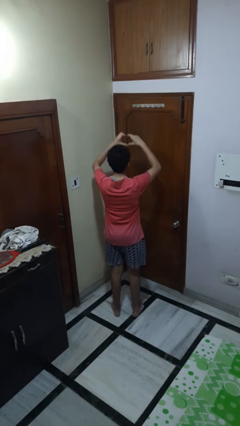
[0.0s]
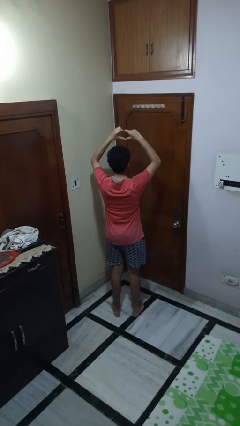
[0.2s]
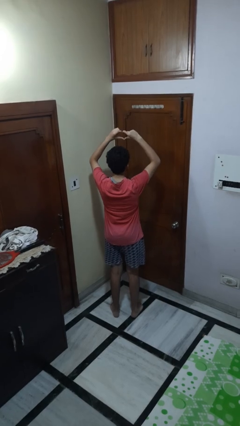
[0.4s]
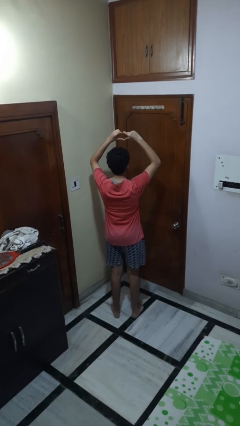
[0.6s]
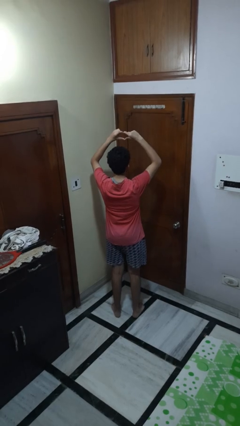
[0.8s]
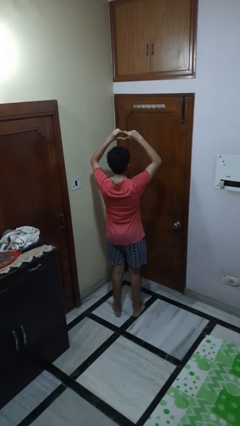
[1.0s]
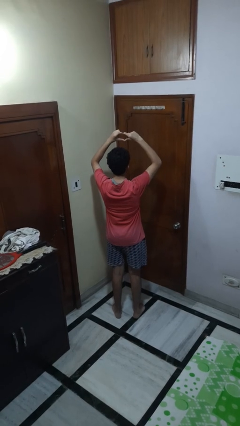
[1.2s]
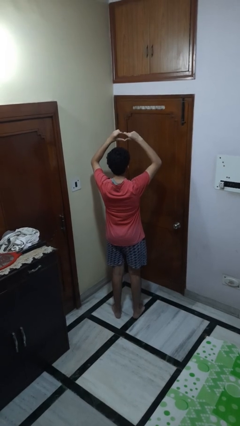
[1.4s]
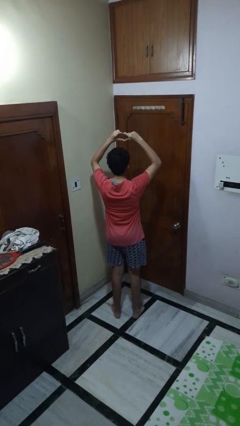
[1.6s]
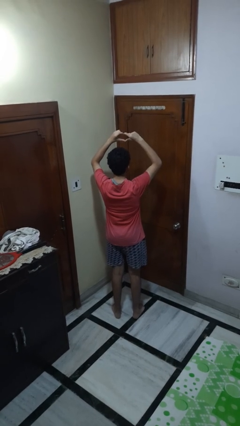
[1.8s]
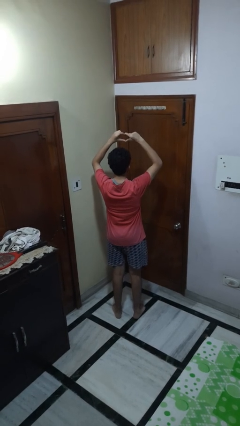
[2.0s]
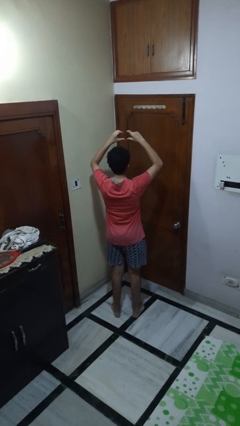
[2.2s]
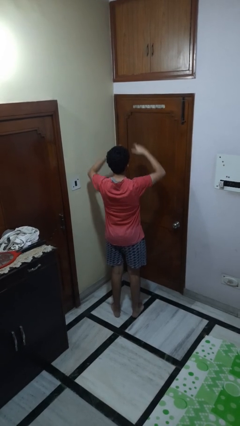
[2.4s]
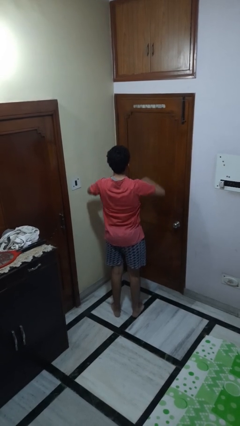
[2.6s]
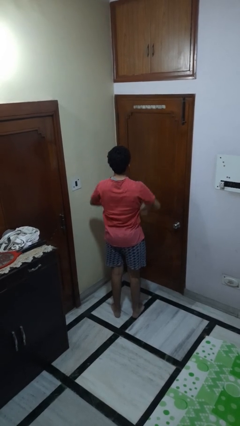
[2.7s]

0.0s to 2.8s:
person gestures heart

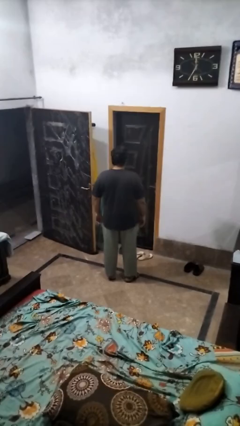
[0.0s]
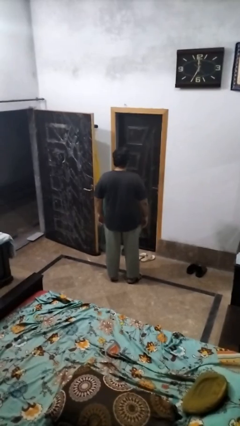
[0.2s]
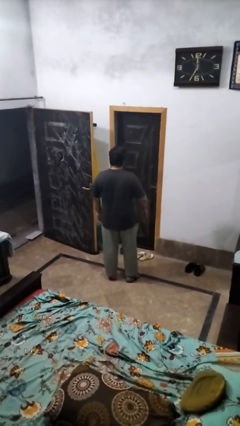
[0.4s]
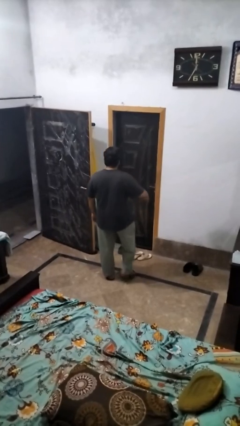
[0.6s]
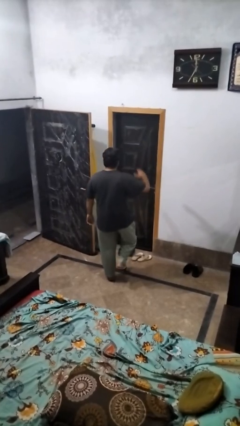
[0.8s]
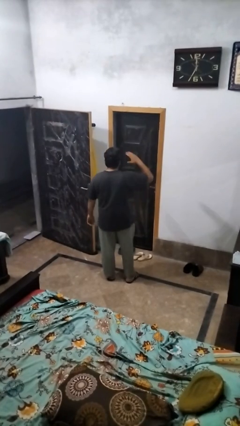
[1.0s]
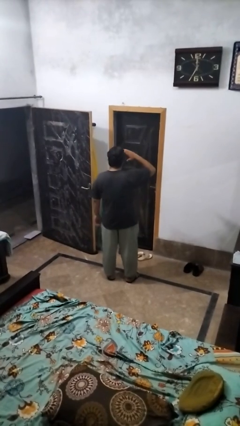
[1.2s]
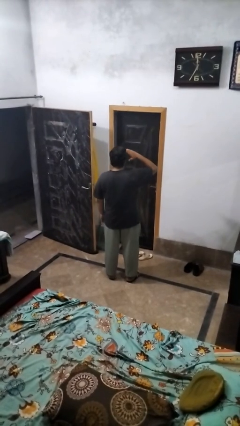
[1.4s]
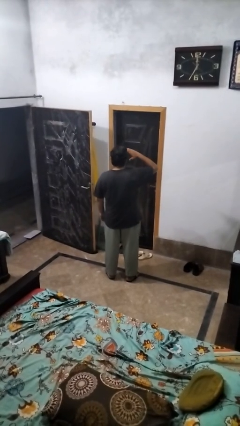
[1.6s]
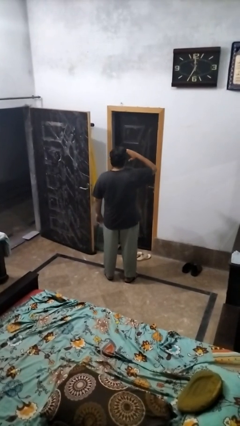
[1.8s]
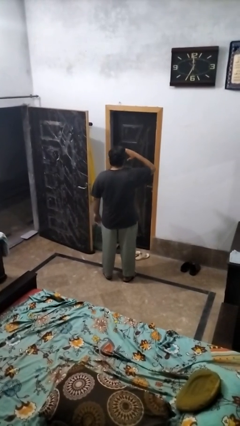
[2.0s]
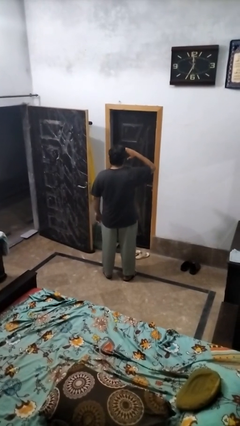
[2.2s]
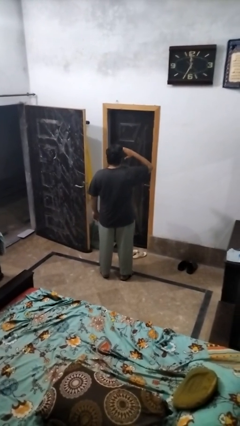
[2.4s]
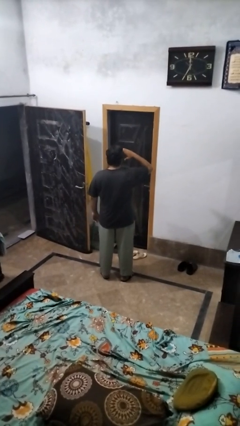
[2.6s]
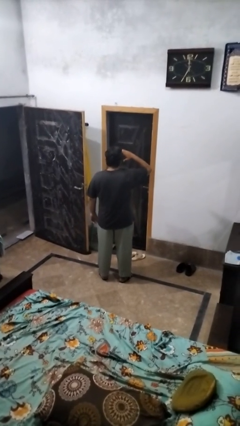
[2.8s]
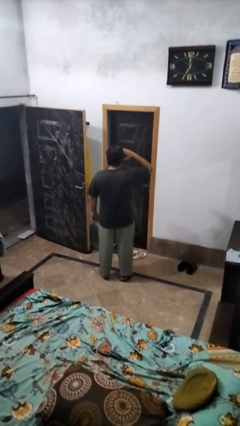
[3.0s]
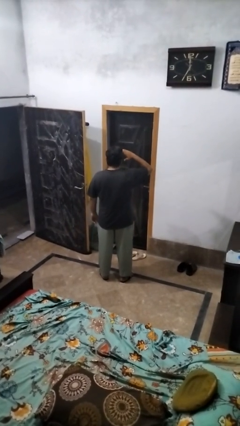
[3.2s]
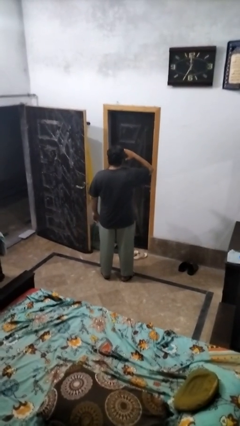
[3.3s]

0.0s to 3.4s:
person salutes

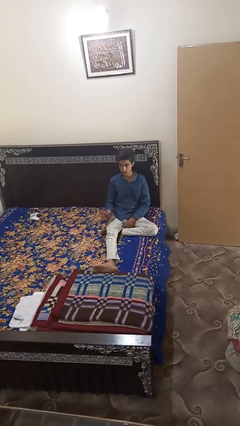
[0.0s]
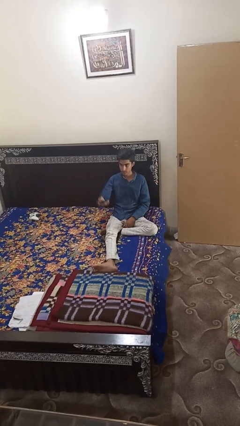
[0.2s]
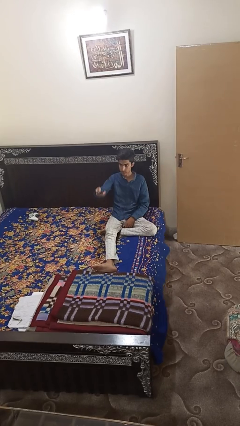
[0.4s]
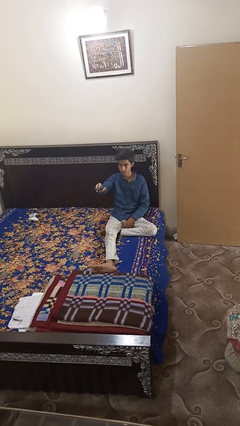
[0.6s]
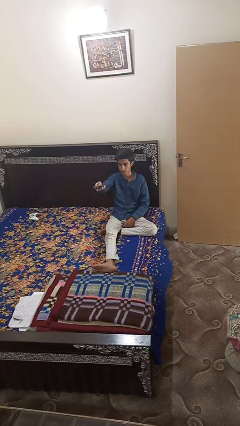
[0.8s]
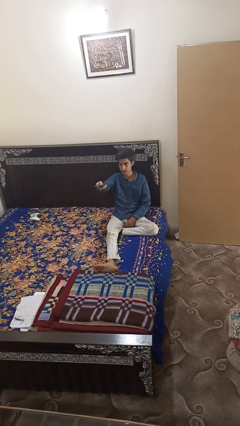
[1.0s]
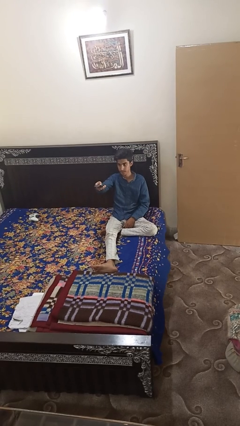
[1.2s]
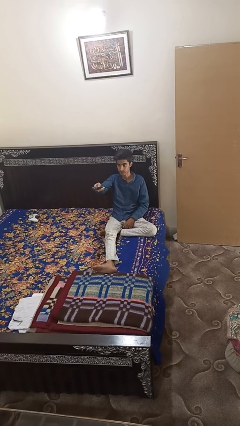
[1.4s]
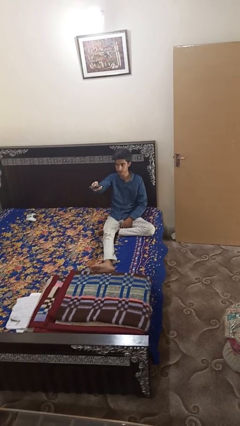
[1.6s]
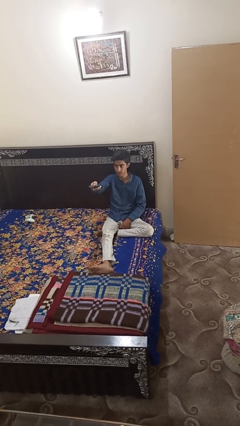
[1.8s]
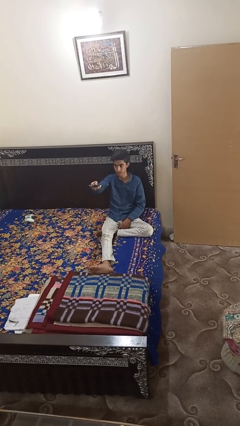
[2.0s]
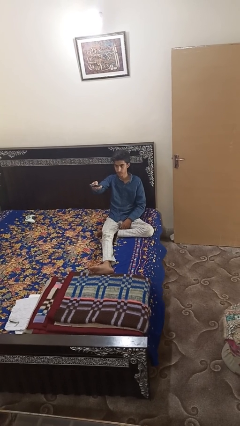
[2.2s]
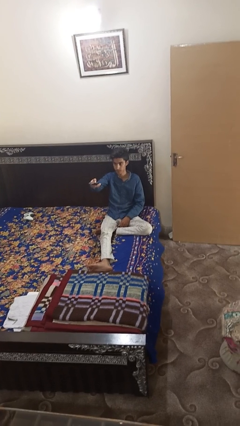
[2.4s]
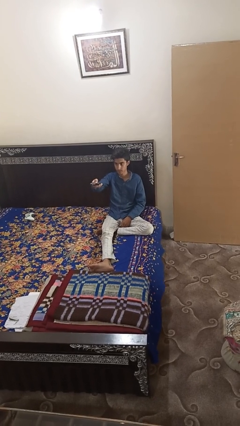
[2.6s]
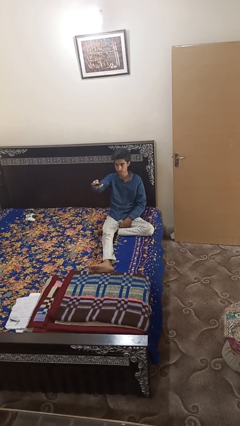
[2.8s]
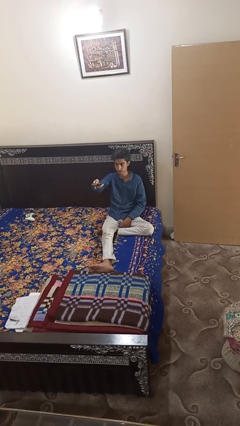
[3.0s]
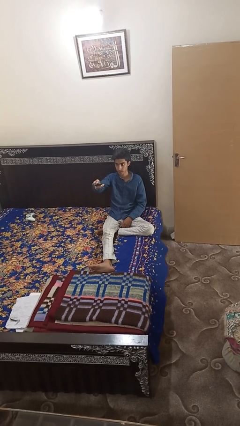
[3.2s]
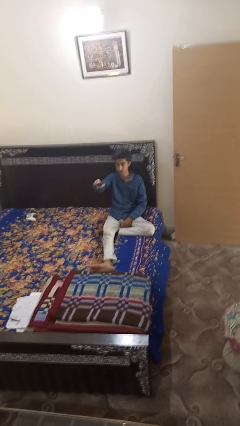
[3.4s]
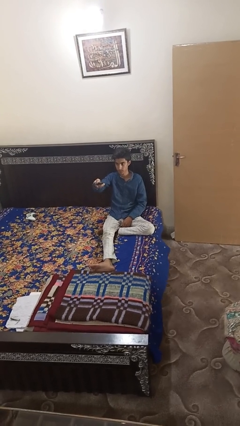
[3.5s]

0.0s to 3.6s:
person uses television remote

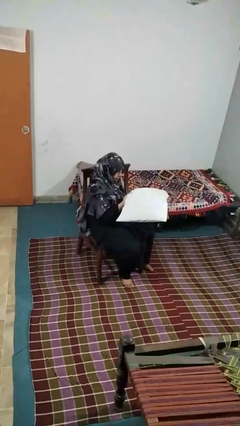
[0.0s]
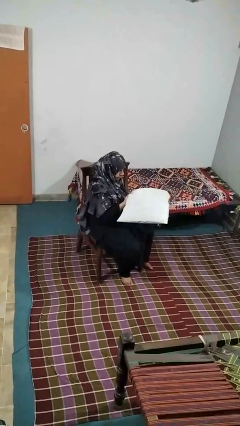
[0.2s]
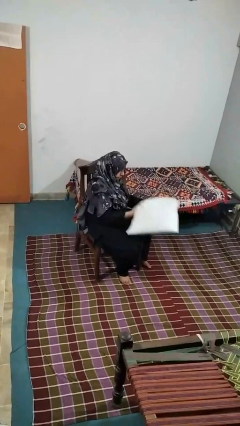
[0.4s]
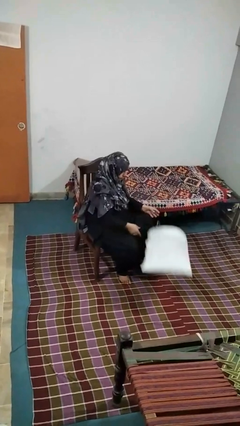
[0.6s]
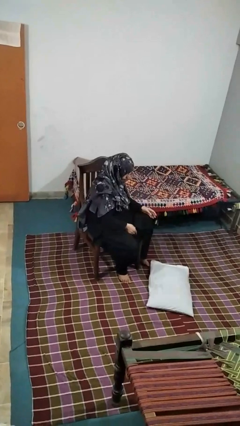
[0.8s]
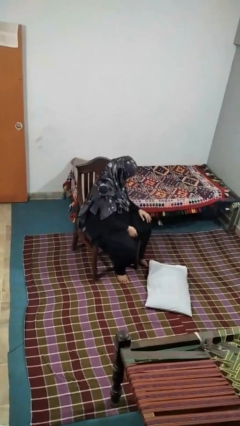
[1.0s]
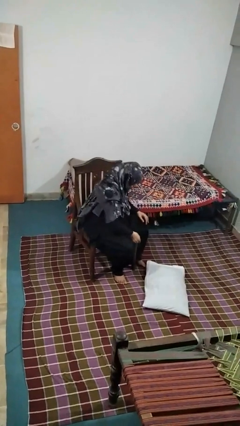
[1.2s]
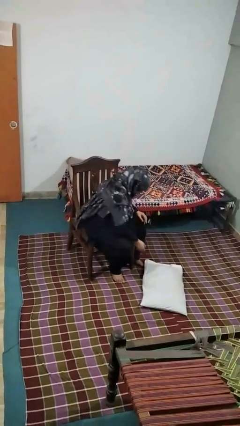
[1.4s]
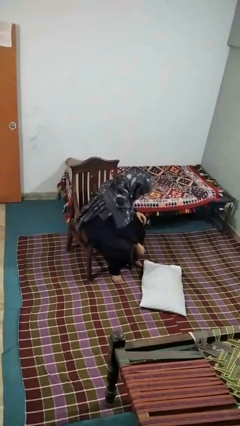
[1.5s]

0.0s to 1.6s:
person drops object

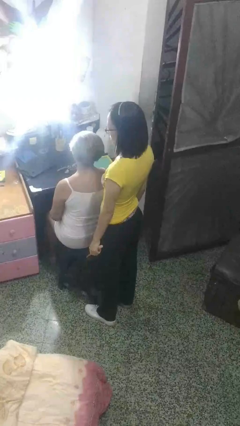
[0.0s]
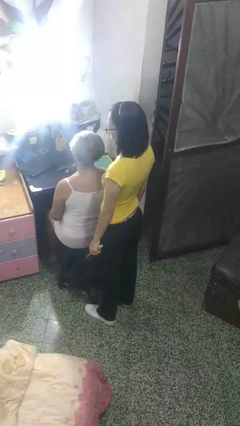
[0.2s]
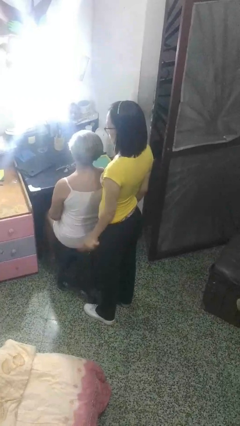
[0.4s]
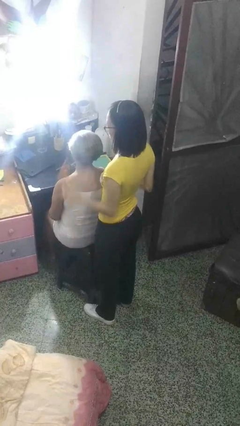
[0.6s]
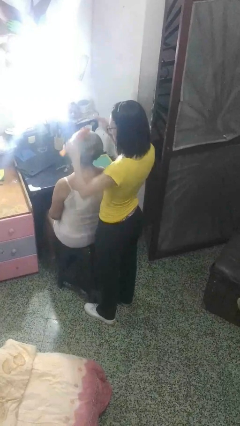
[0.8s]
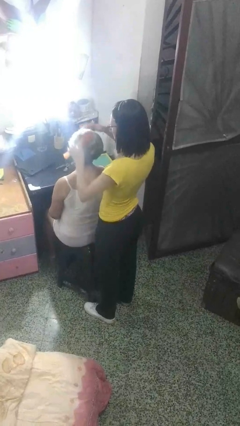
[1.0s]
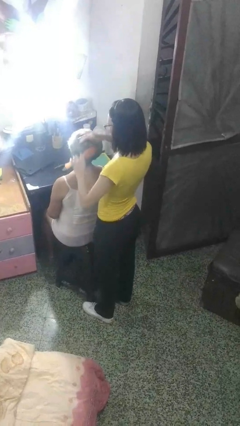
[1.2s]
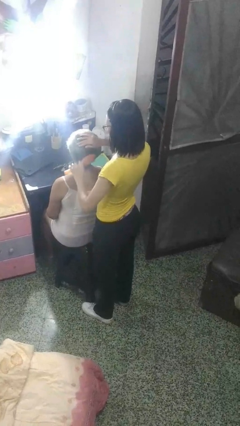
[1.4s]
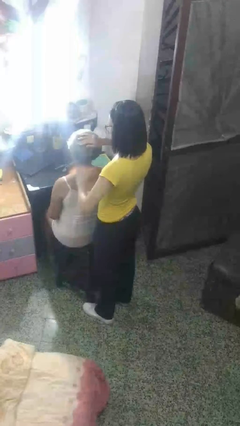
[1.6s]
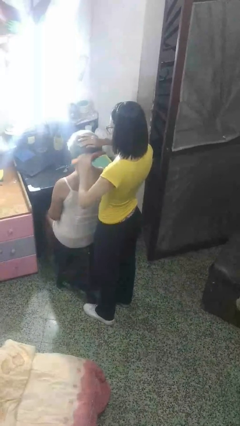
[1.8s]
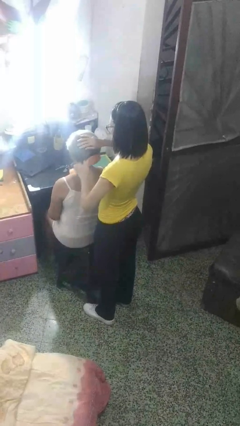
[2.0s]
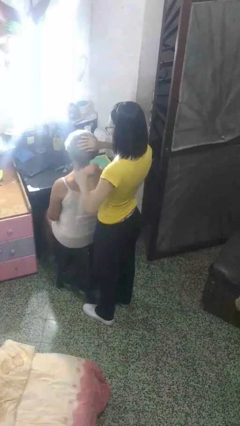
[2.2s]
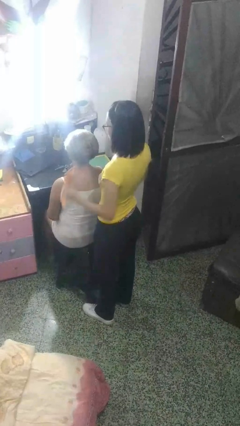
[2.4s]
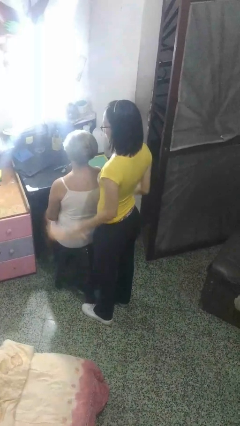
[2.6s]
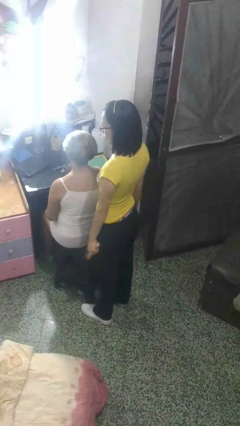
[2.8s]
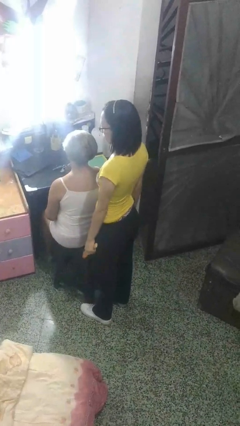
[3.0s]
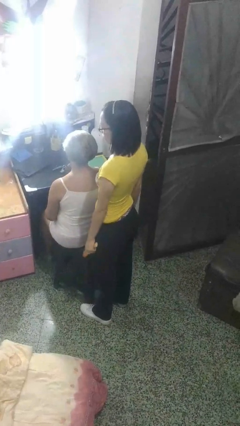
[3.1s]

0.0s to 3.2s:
person brushes hair of person

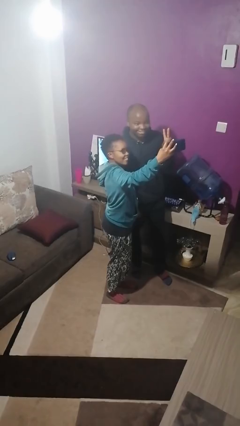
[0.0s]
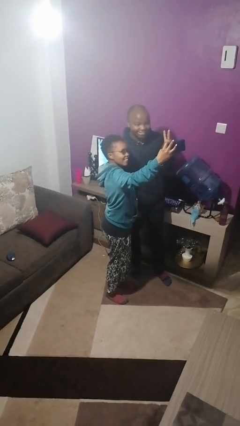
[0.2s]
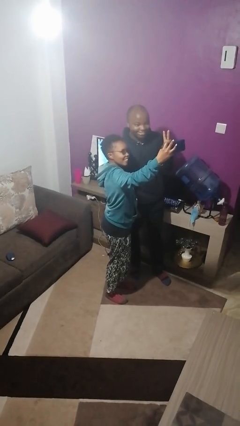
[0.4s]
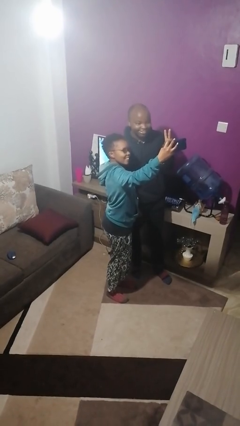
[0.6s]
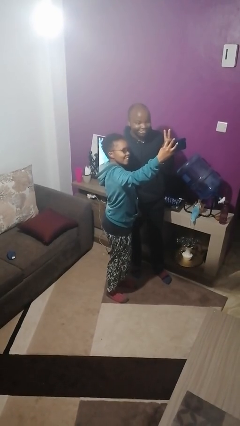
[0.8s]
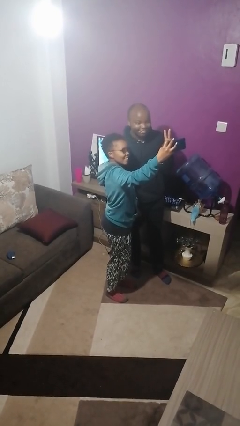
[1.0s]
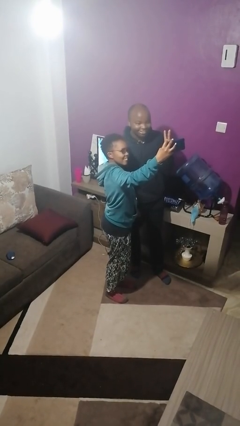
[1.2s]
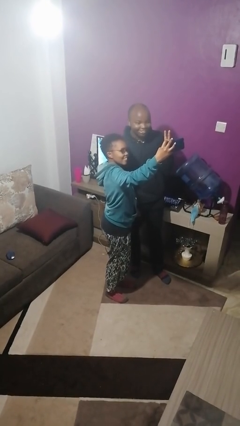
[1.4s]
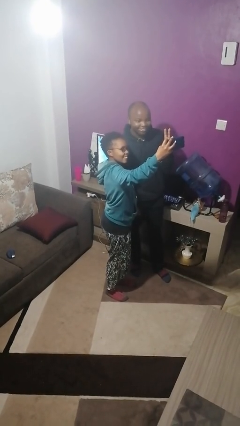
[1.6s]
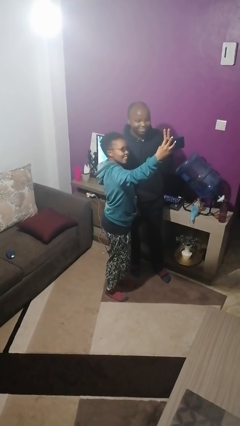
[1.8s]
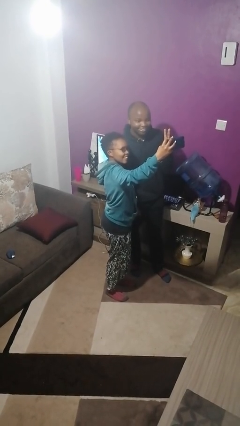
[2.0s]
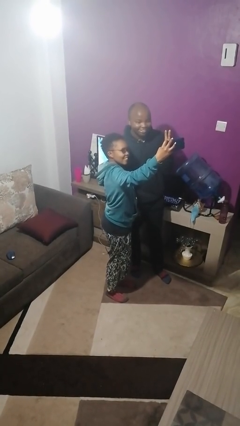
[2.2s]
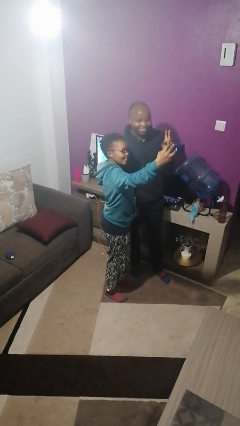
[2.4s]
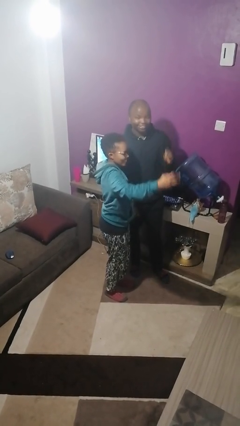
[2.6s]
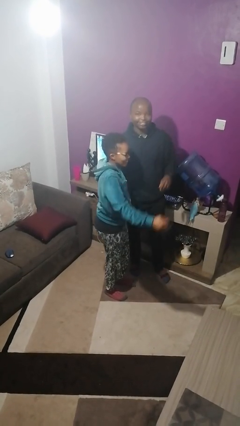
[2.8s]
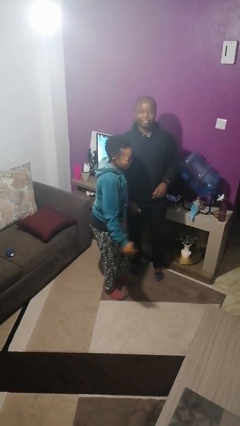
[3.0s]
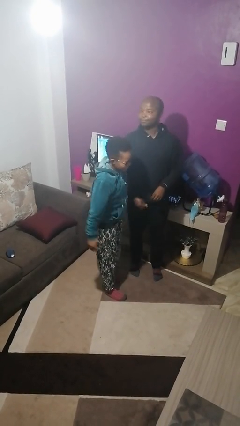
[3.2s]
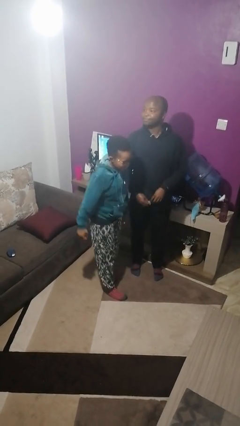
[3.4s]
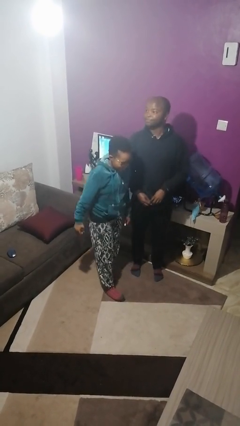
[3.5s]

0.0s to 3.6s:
person takes selfie with person
